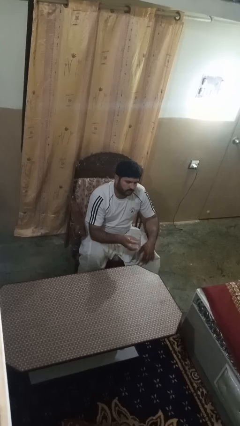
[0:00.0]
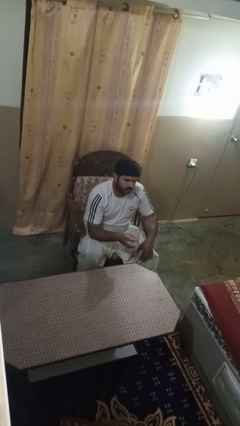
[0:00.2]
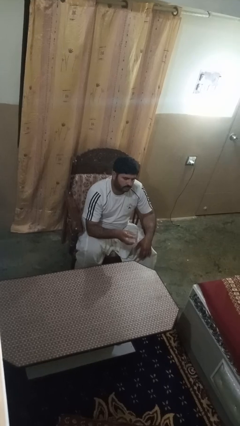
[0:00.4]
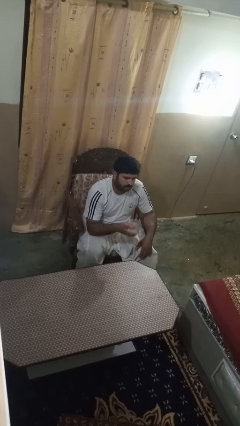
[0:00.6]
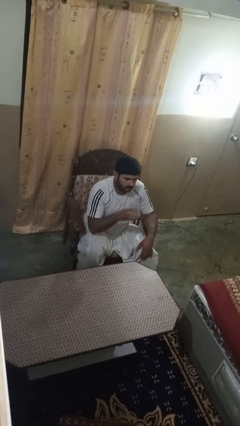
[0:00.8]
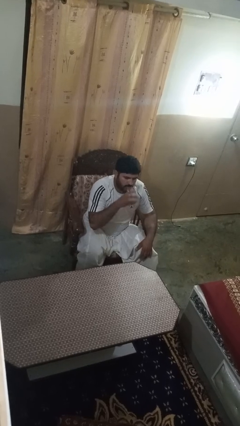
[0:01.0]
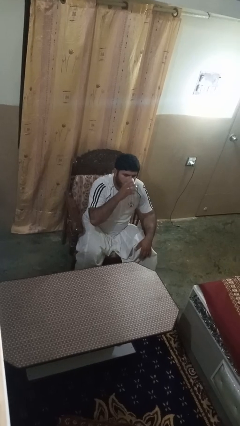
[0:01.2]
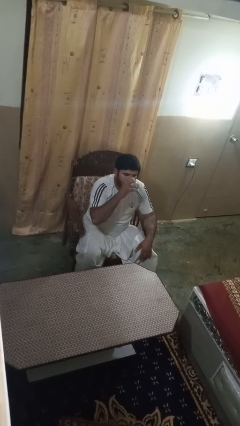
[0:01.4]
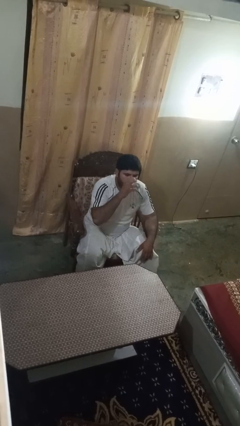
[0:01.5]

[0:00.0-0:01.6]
person drinks from shotglass

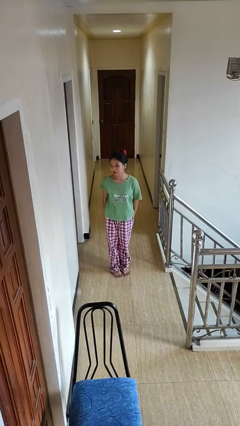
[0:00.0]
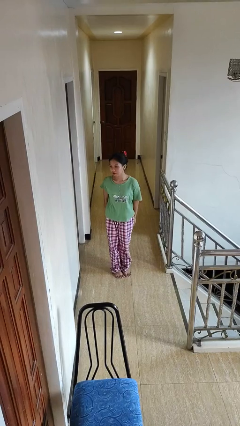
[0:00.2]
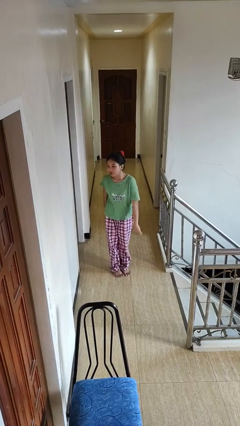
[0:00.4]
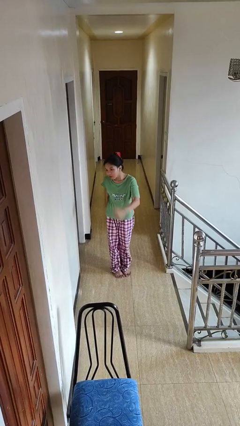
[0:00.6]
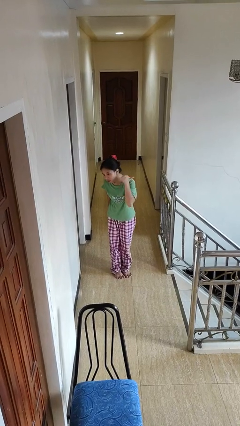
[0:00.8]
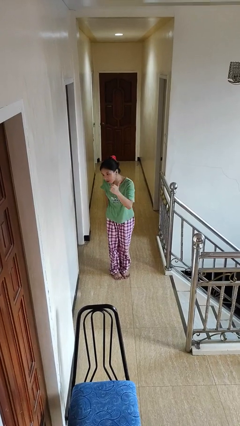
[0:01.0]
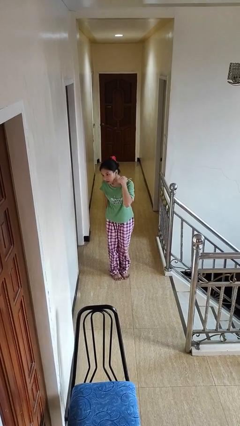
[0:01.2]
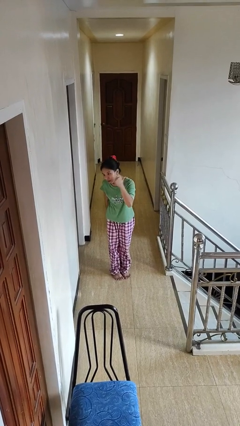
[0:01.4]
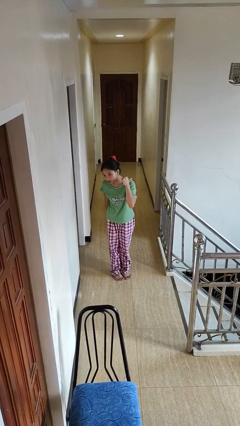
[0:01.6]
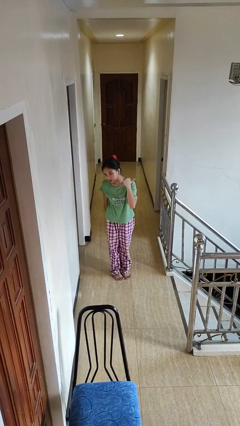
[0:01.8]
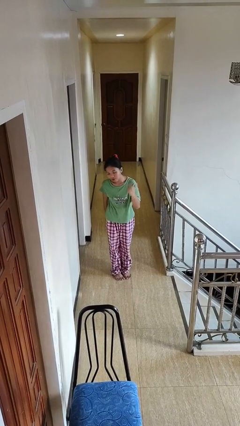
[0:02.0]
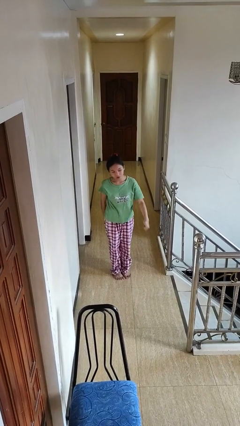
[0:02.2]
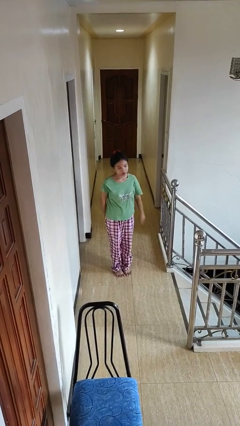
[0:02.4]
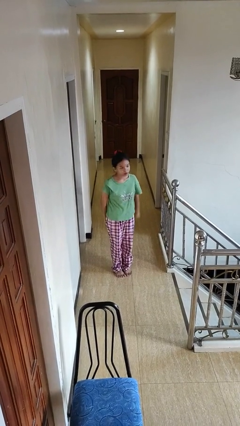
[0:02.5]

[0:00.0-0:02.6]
person gestures behind me

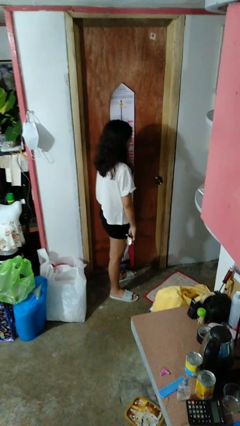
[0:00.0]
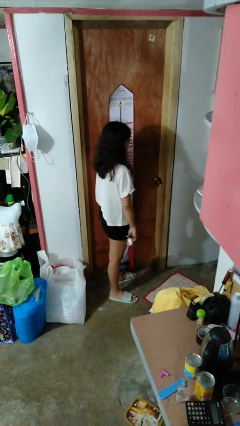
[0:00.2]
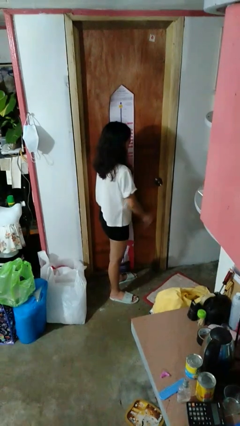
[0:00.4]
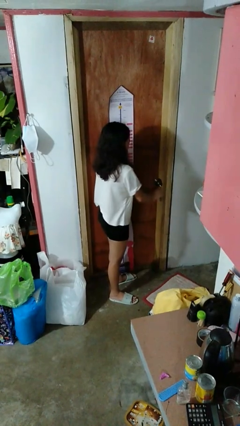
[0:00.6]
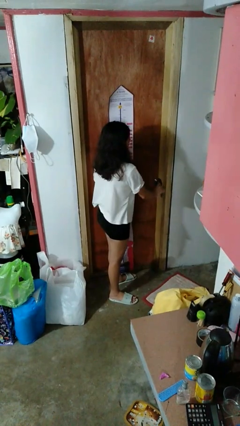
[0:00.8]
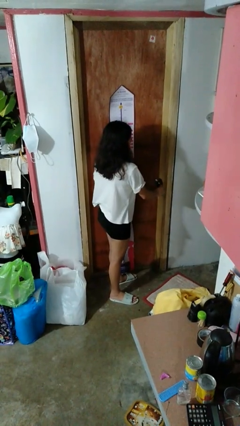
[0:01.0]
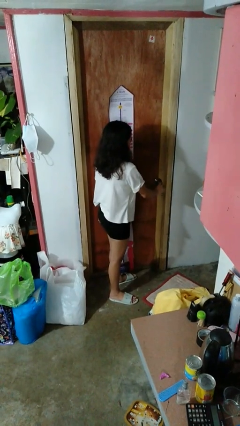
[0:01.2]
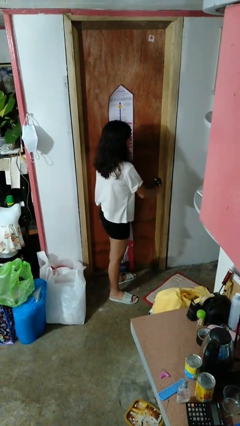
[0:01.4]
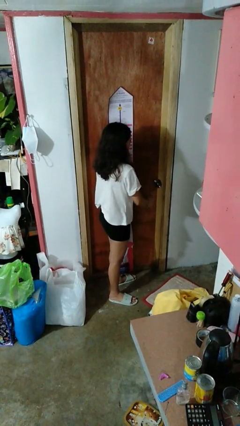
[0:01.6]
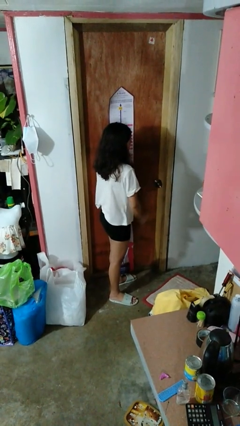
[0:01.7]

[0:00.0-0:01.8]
person unlocks door with keys

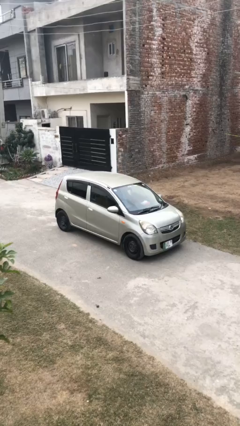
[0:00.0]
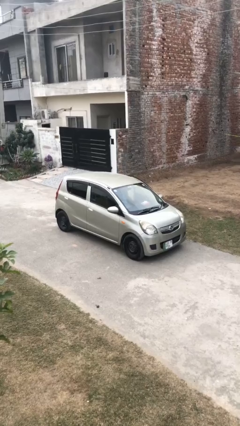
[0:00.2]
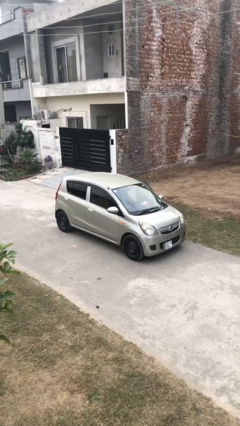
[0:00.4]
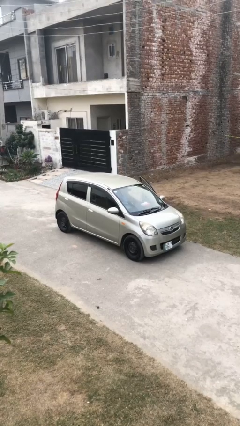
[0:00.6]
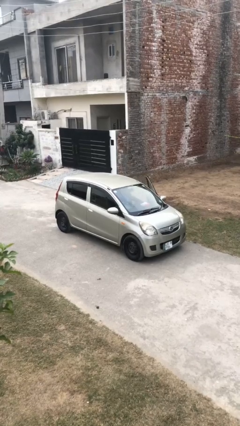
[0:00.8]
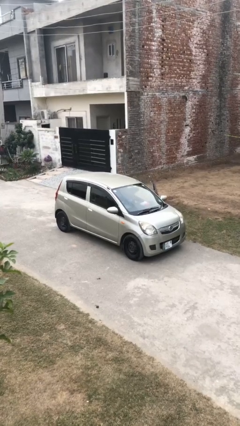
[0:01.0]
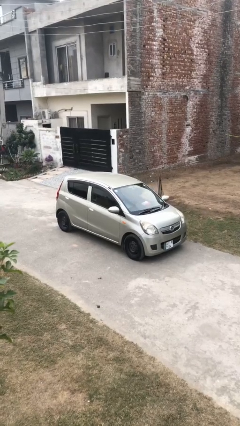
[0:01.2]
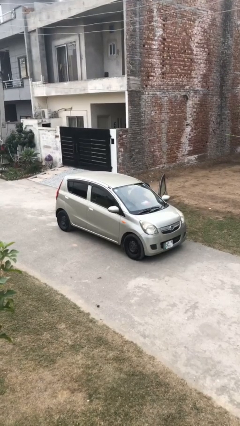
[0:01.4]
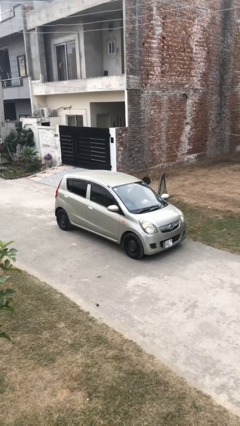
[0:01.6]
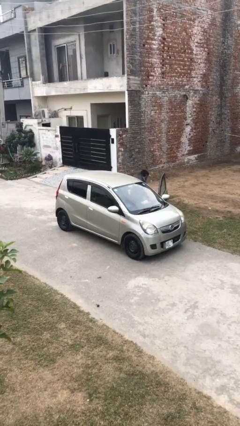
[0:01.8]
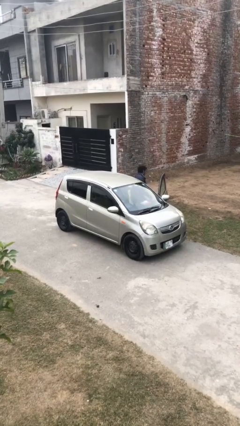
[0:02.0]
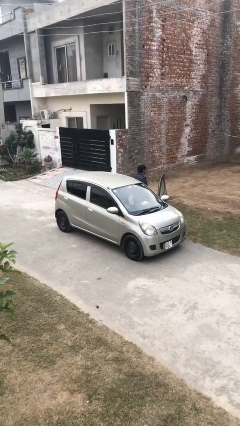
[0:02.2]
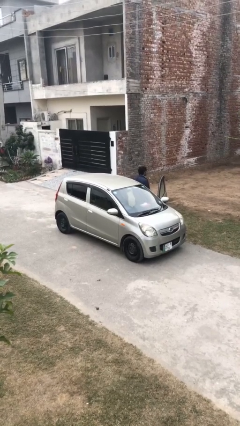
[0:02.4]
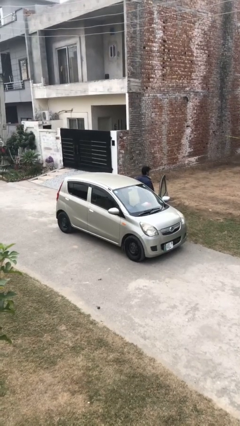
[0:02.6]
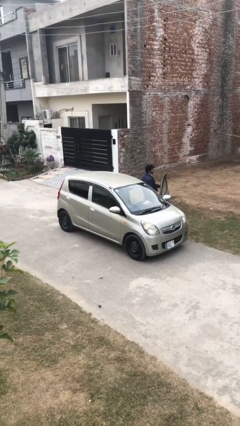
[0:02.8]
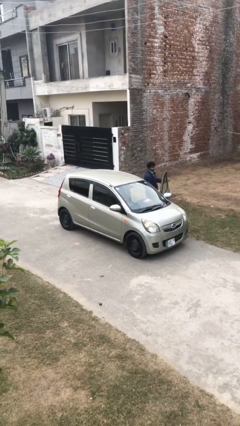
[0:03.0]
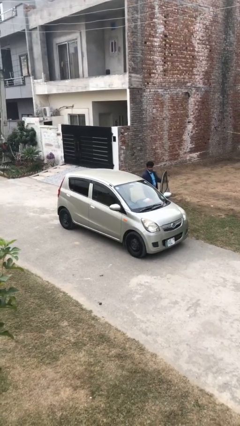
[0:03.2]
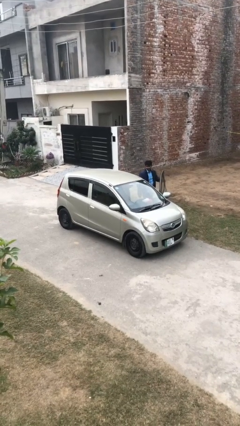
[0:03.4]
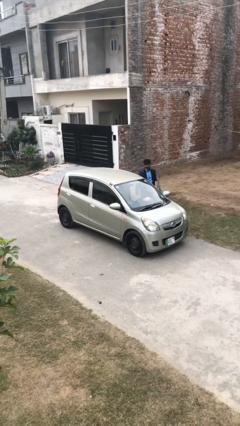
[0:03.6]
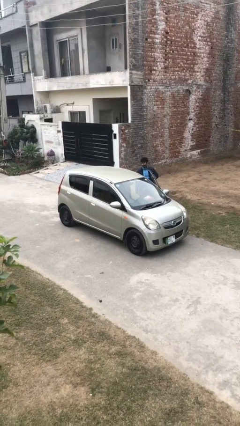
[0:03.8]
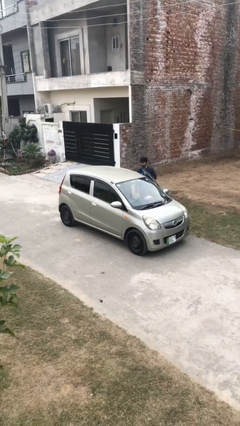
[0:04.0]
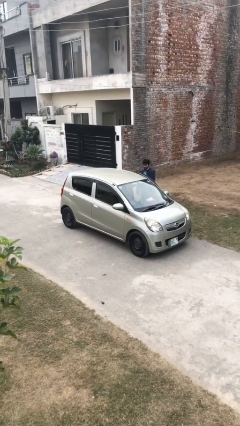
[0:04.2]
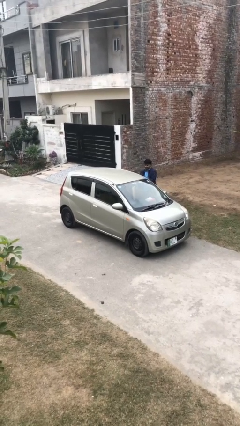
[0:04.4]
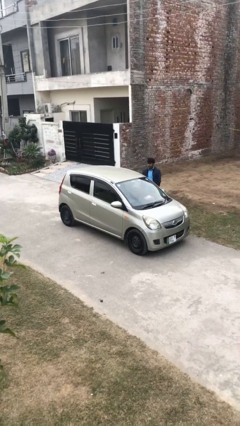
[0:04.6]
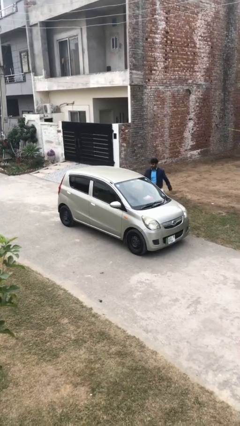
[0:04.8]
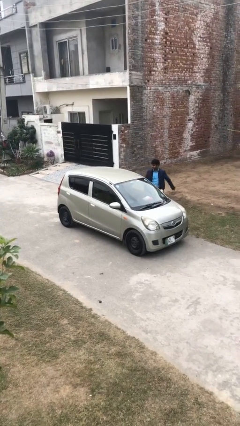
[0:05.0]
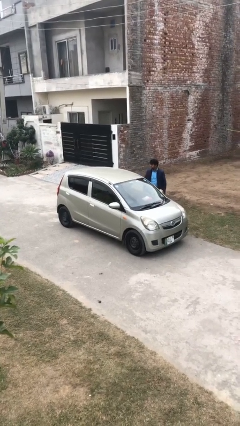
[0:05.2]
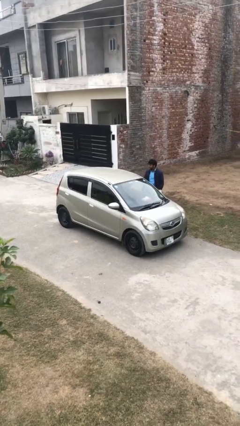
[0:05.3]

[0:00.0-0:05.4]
car drops off person

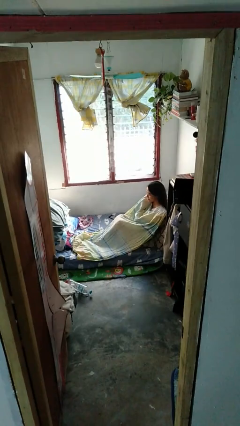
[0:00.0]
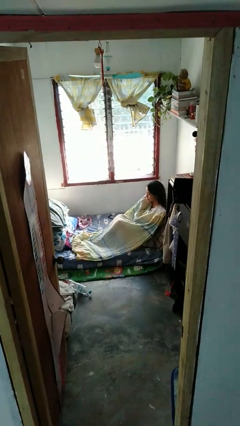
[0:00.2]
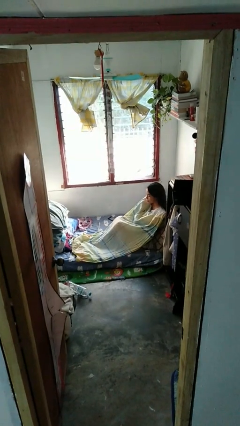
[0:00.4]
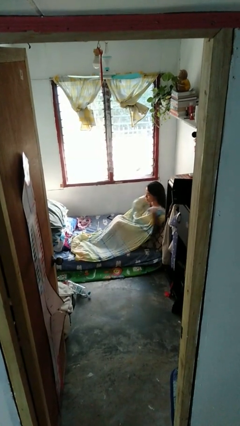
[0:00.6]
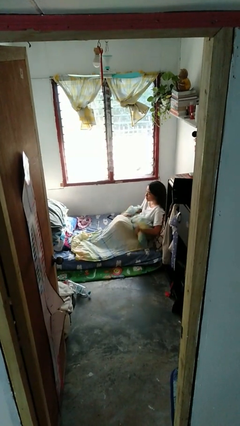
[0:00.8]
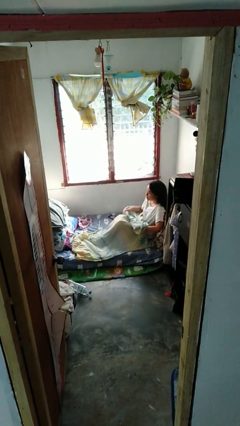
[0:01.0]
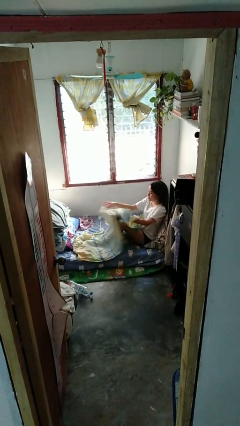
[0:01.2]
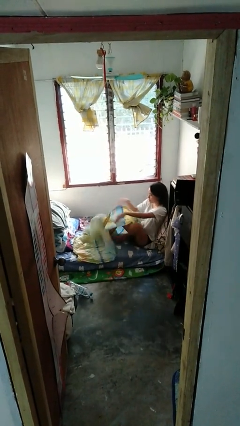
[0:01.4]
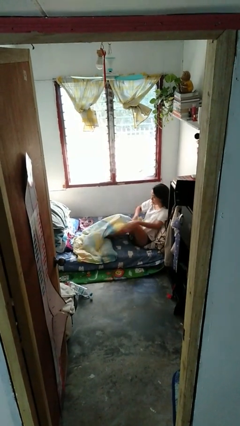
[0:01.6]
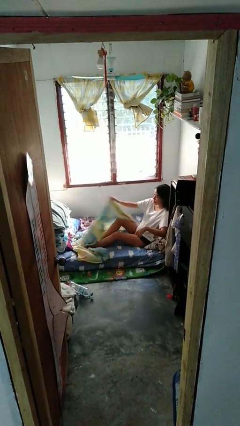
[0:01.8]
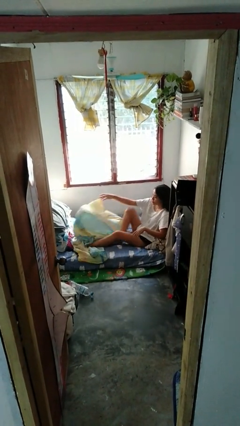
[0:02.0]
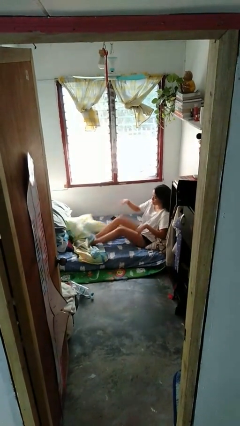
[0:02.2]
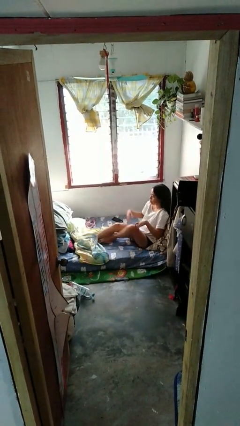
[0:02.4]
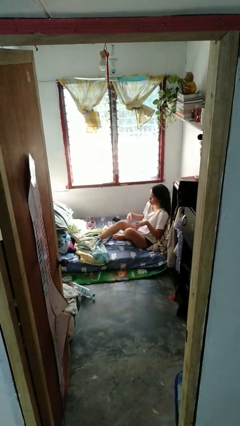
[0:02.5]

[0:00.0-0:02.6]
person uncovers with bedsheets

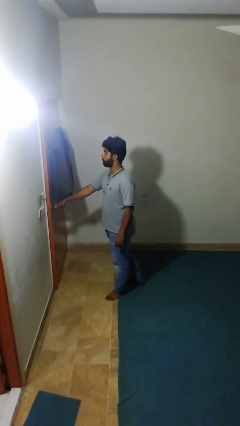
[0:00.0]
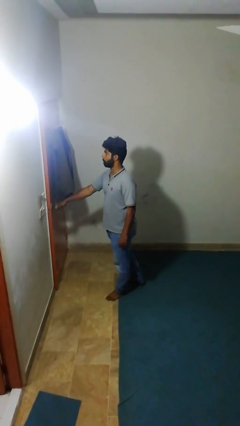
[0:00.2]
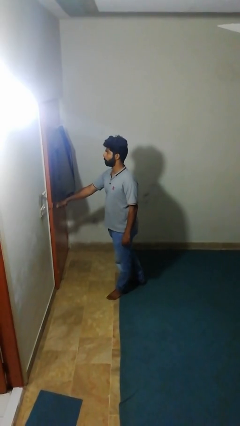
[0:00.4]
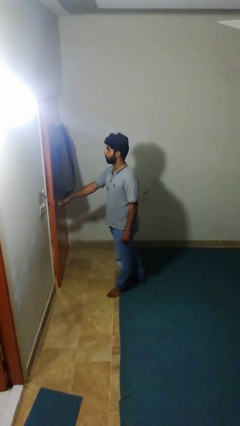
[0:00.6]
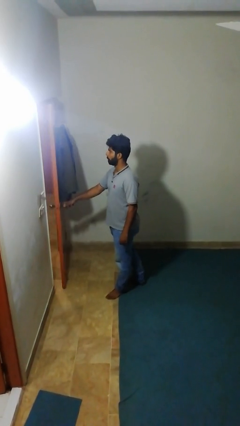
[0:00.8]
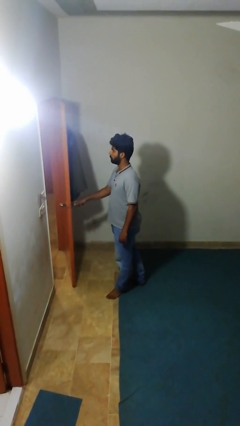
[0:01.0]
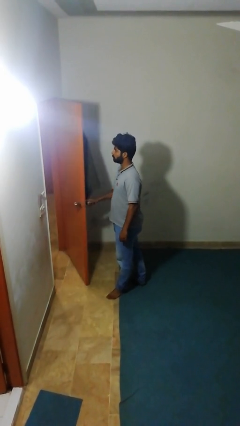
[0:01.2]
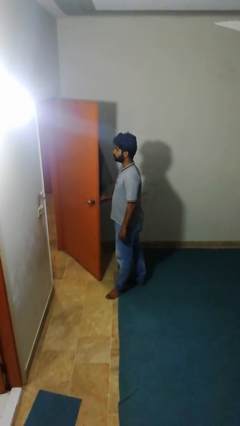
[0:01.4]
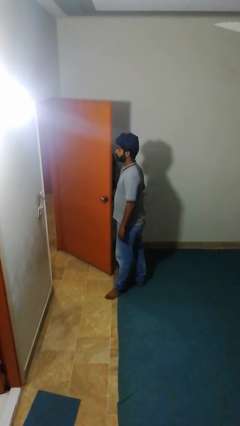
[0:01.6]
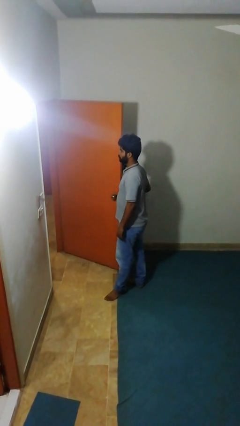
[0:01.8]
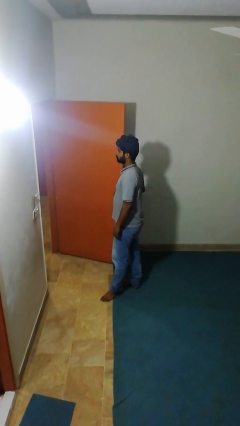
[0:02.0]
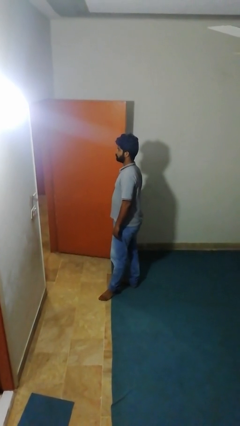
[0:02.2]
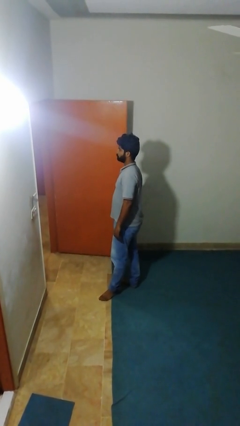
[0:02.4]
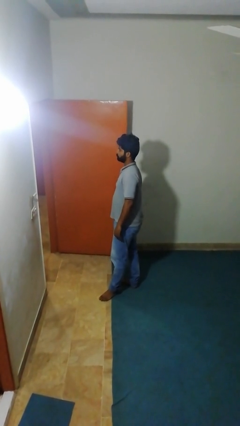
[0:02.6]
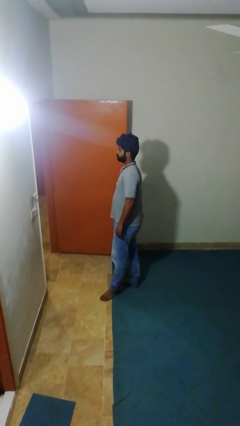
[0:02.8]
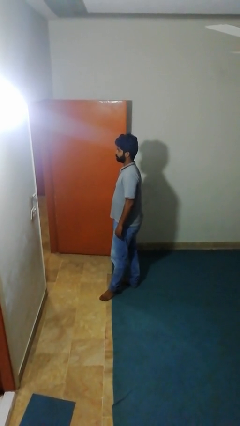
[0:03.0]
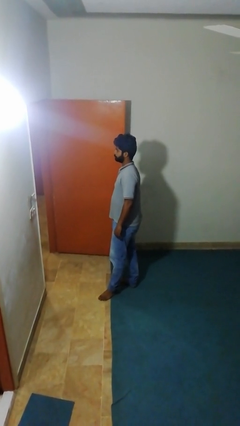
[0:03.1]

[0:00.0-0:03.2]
person opens facility door
